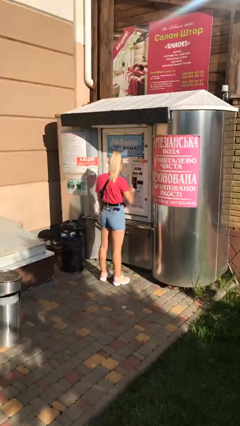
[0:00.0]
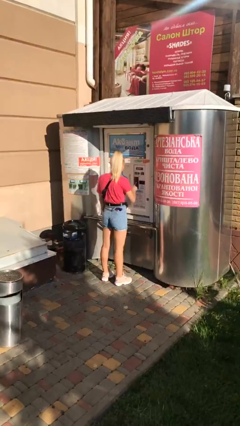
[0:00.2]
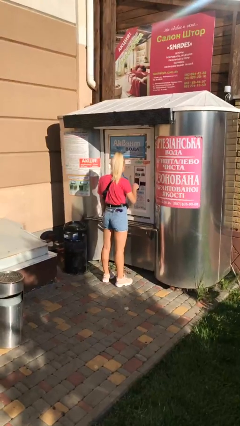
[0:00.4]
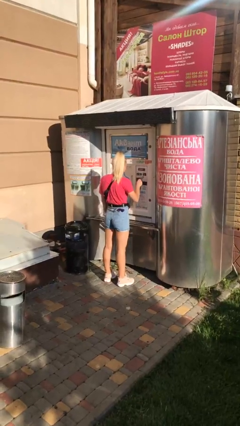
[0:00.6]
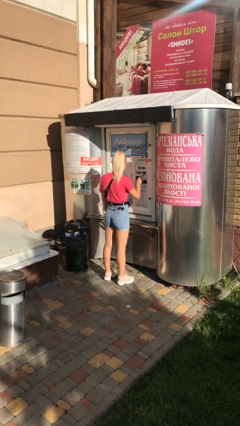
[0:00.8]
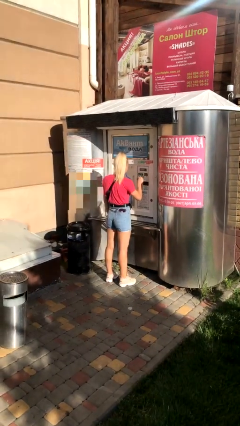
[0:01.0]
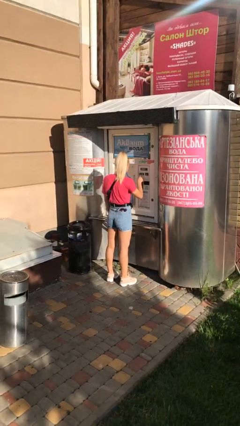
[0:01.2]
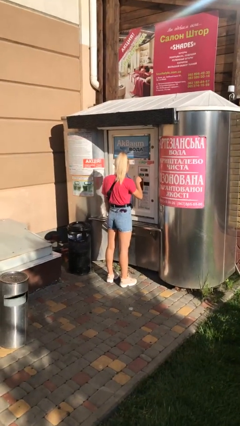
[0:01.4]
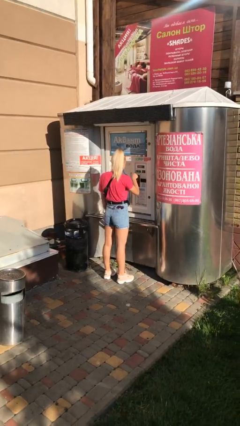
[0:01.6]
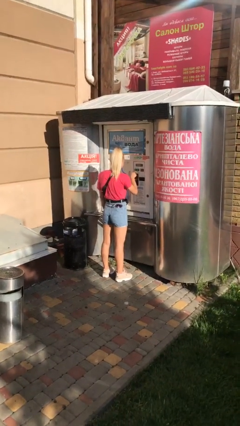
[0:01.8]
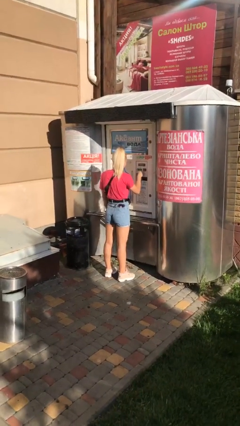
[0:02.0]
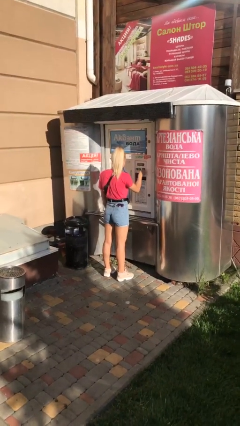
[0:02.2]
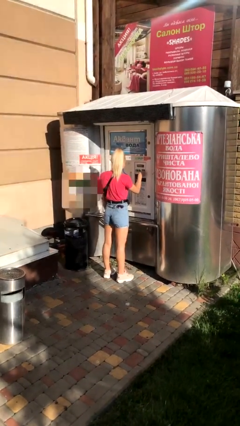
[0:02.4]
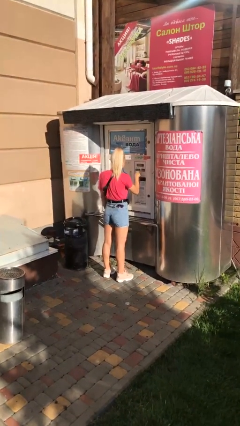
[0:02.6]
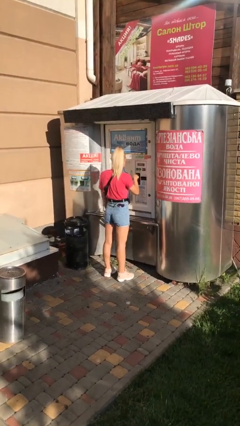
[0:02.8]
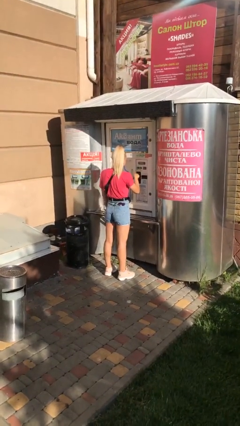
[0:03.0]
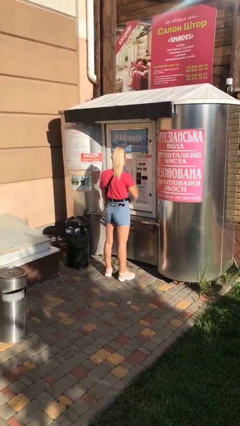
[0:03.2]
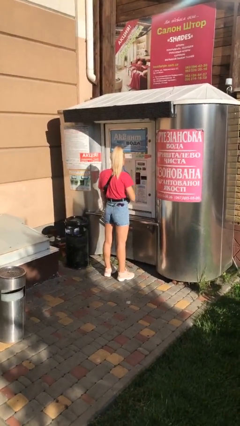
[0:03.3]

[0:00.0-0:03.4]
person purchases from machine

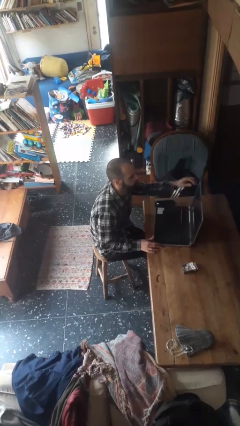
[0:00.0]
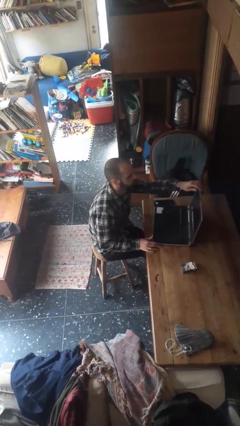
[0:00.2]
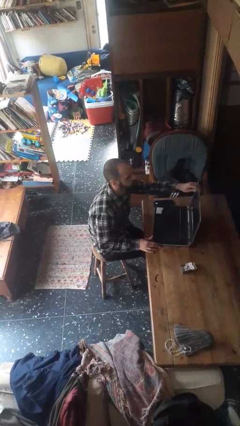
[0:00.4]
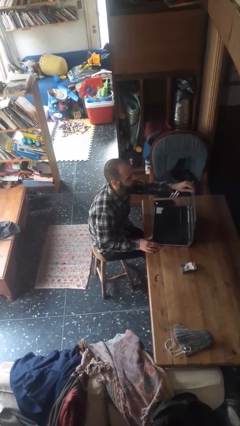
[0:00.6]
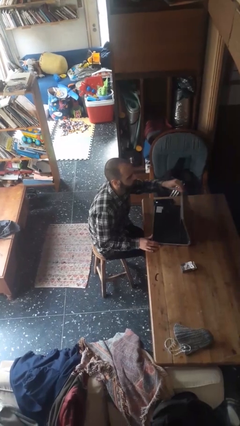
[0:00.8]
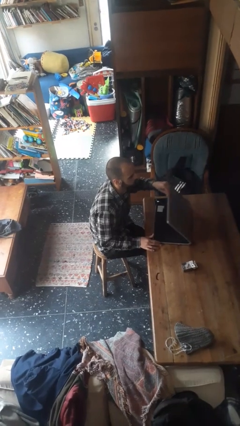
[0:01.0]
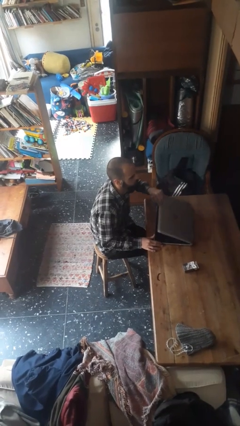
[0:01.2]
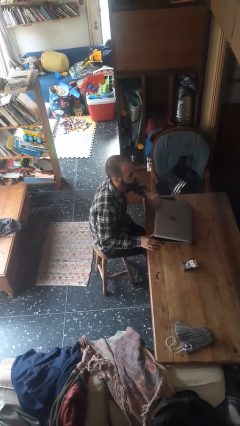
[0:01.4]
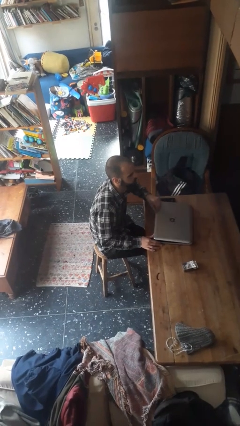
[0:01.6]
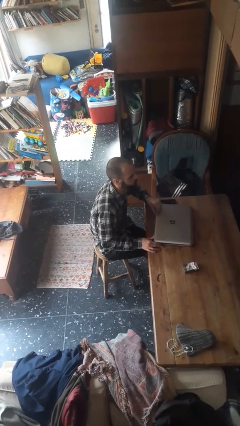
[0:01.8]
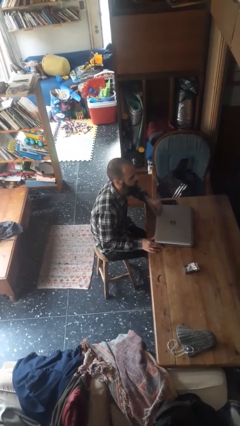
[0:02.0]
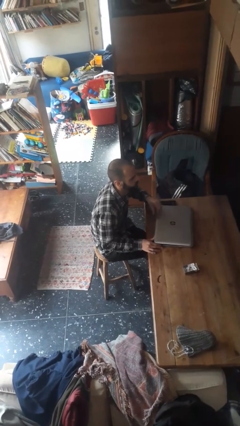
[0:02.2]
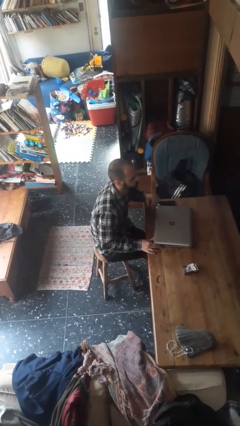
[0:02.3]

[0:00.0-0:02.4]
person closes laptop

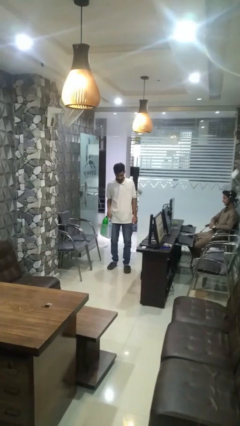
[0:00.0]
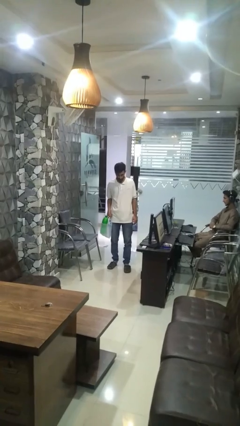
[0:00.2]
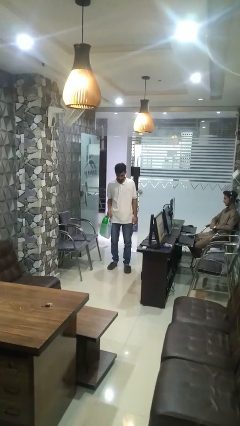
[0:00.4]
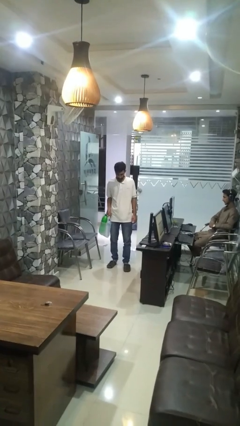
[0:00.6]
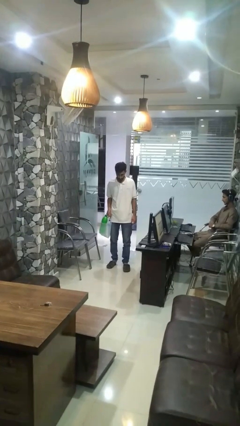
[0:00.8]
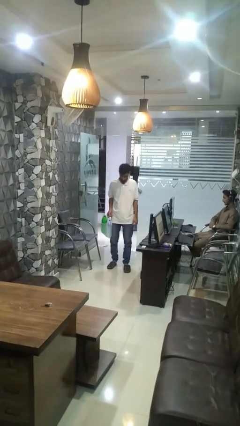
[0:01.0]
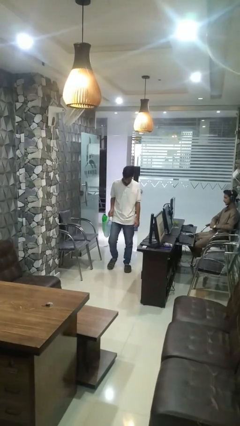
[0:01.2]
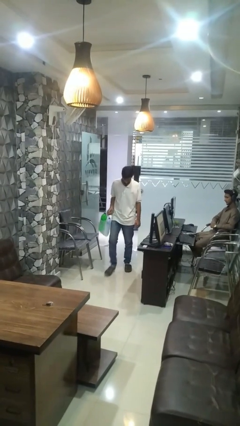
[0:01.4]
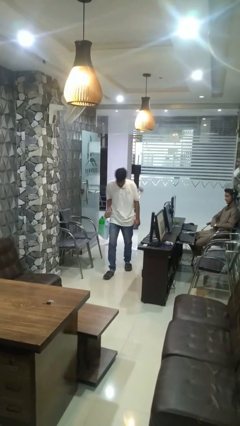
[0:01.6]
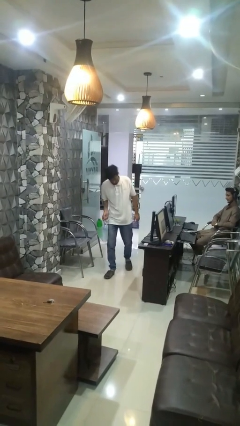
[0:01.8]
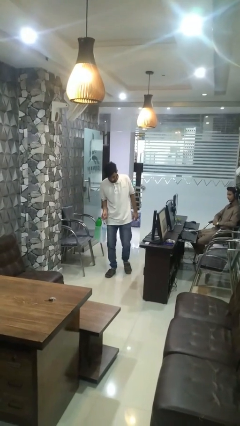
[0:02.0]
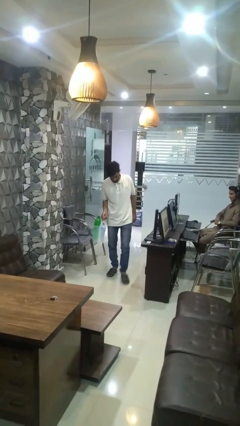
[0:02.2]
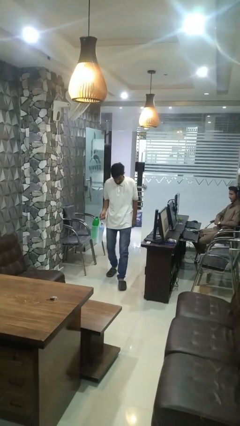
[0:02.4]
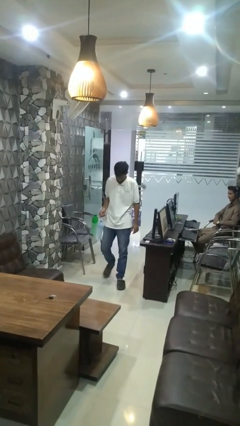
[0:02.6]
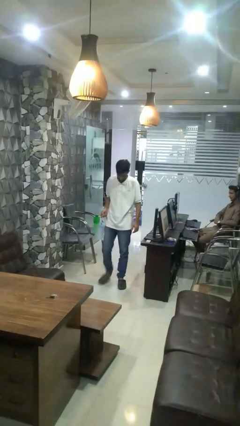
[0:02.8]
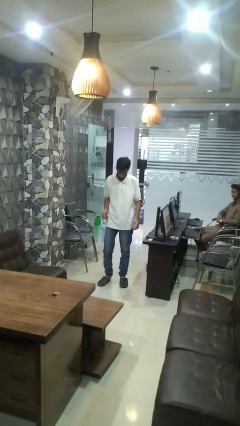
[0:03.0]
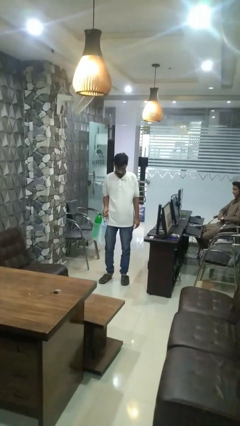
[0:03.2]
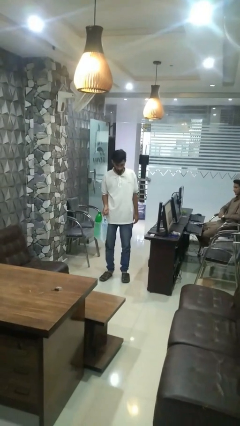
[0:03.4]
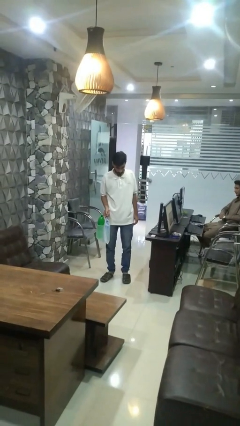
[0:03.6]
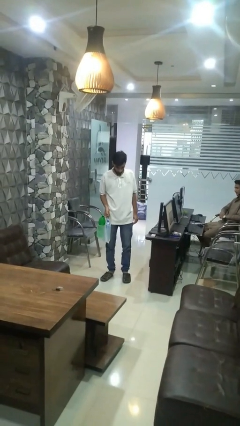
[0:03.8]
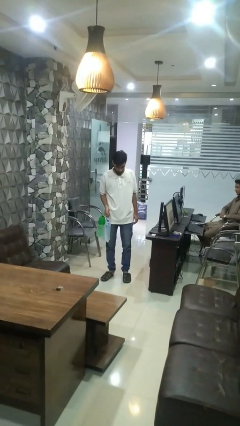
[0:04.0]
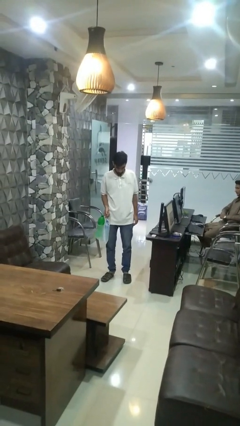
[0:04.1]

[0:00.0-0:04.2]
person carries groceries

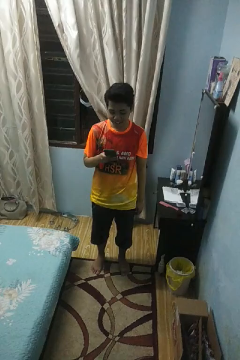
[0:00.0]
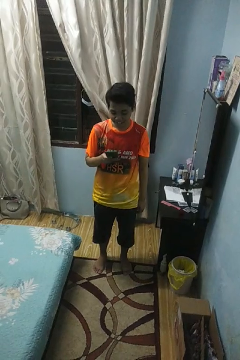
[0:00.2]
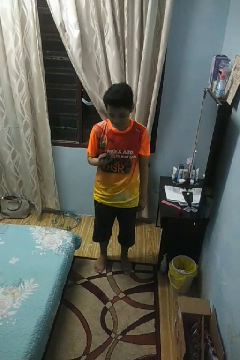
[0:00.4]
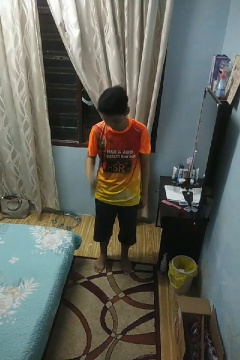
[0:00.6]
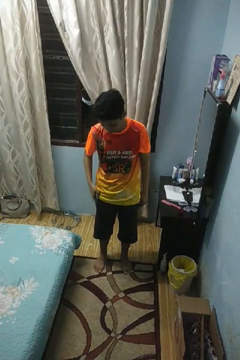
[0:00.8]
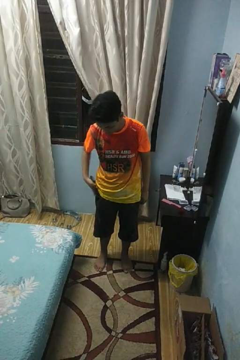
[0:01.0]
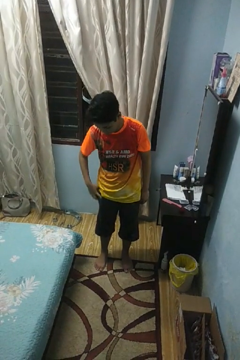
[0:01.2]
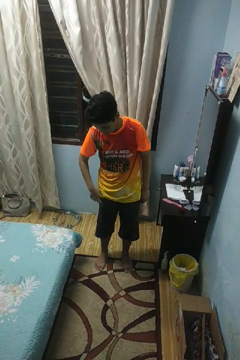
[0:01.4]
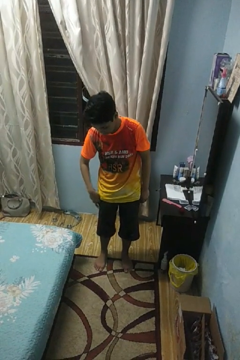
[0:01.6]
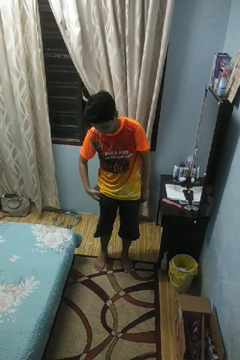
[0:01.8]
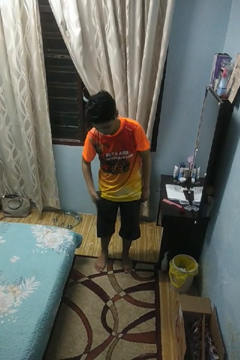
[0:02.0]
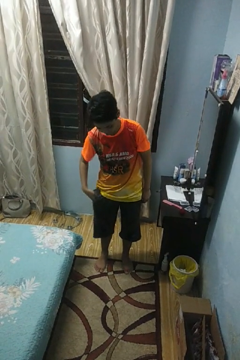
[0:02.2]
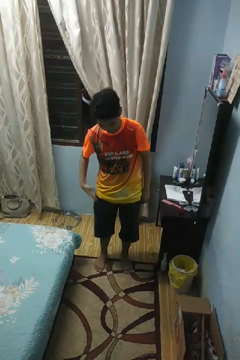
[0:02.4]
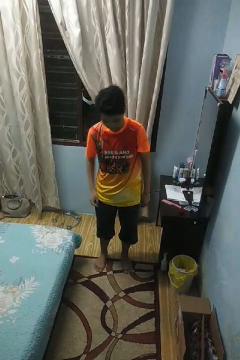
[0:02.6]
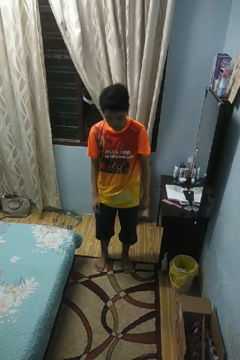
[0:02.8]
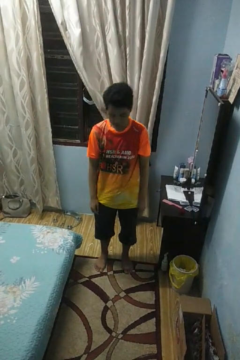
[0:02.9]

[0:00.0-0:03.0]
person puts phone into pocket

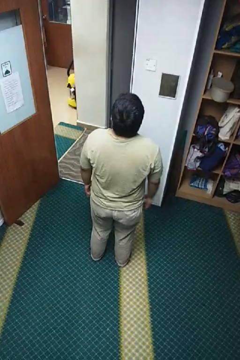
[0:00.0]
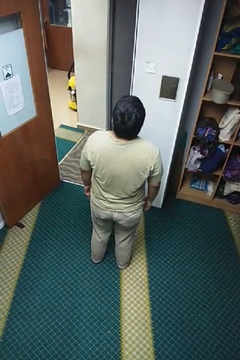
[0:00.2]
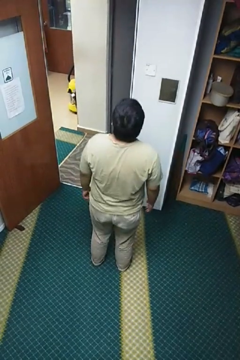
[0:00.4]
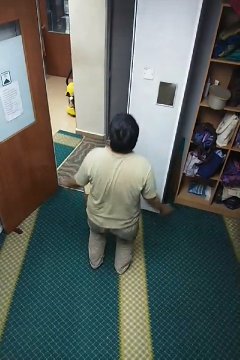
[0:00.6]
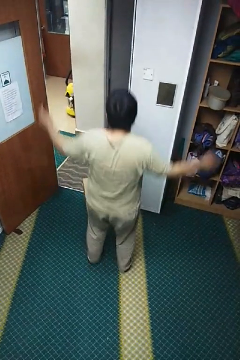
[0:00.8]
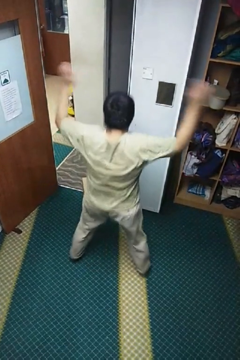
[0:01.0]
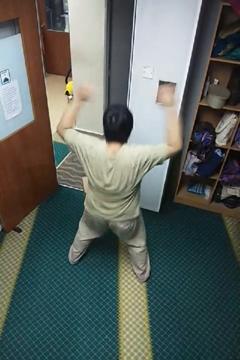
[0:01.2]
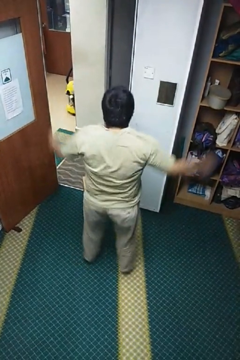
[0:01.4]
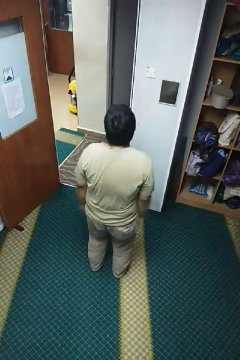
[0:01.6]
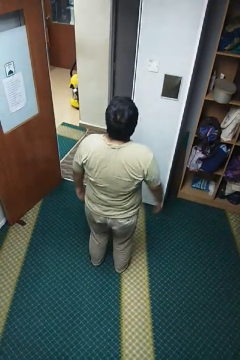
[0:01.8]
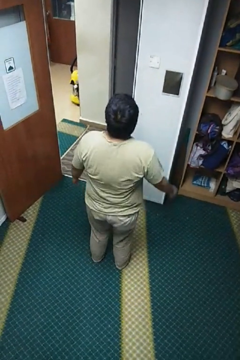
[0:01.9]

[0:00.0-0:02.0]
person exercises with jumping jacks

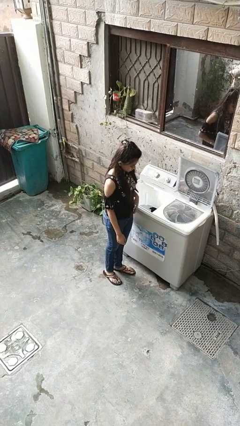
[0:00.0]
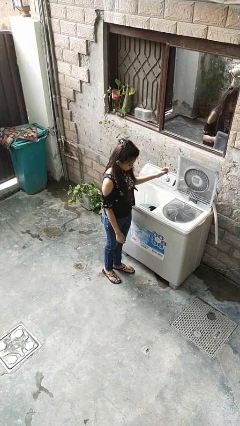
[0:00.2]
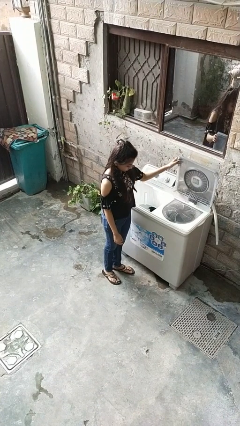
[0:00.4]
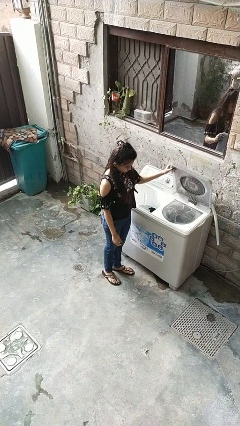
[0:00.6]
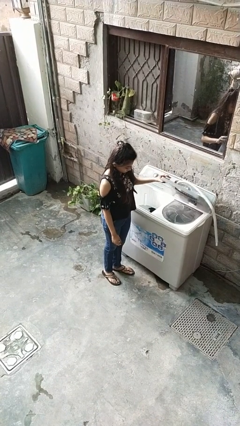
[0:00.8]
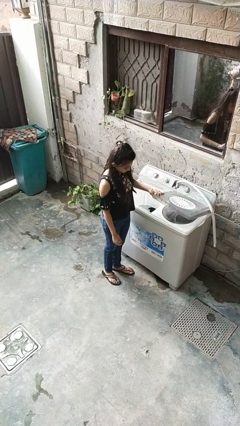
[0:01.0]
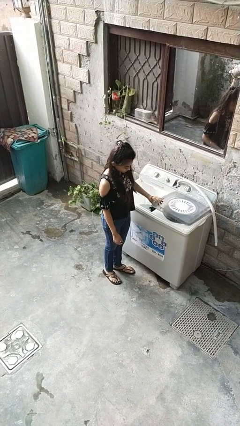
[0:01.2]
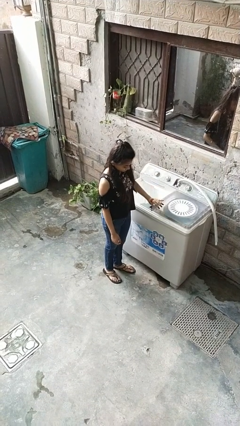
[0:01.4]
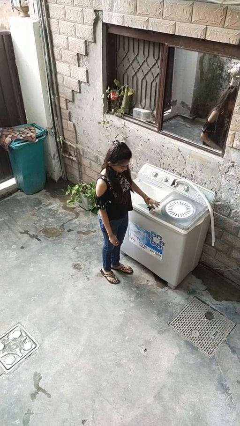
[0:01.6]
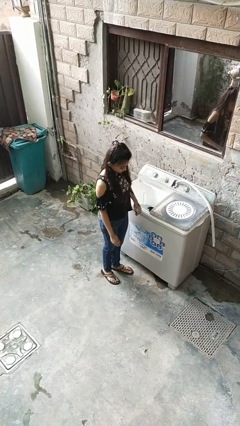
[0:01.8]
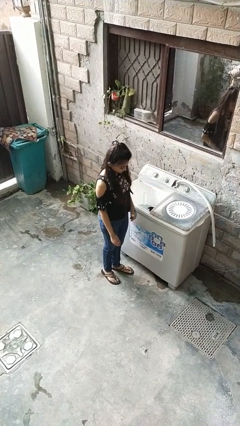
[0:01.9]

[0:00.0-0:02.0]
person closes clothes washer

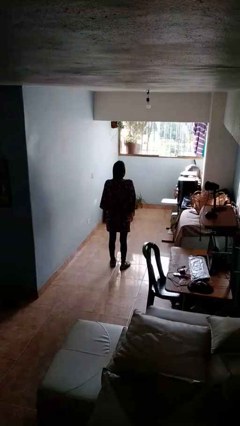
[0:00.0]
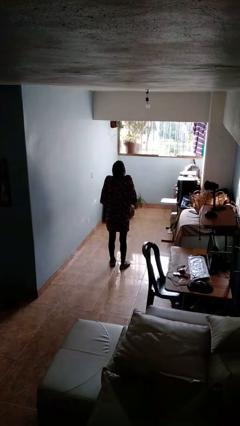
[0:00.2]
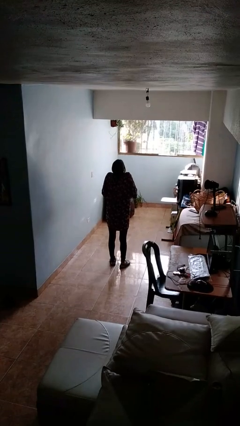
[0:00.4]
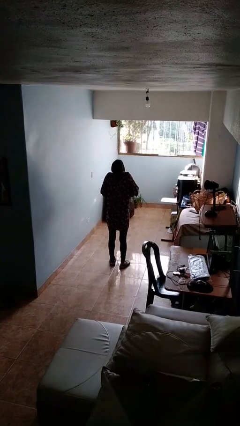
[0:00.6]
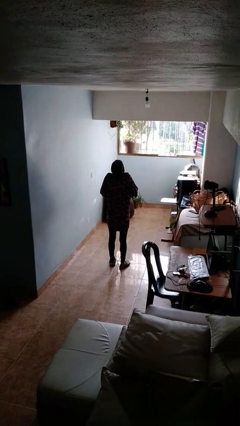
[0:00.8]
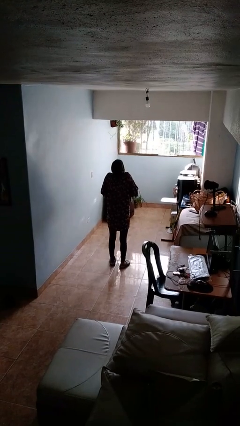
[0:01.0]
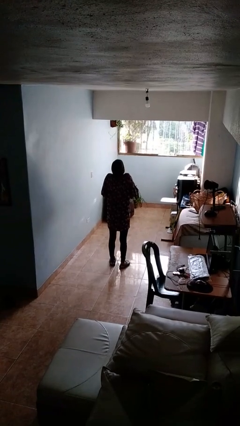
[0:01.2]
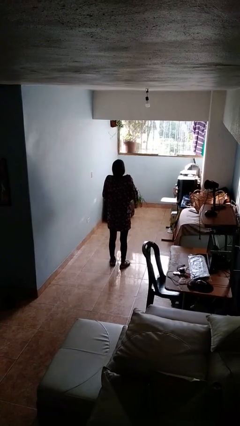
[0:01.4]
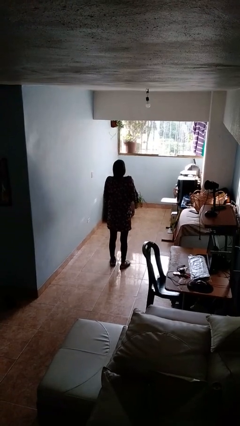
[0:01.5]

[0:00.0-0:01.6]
person shrugs
